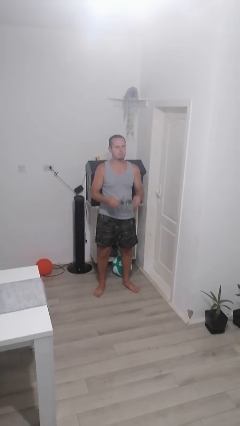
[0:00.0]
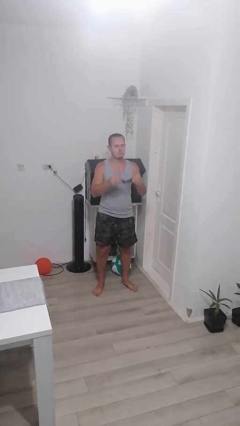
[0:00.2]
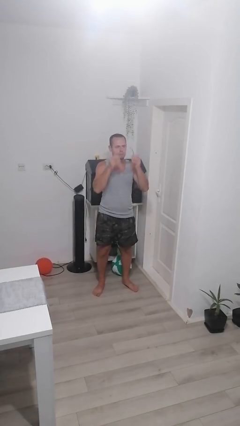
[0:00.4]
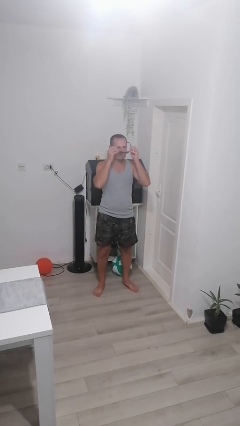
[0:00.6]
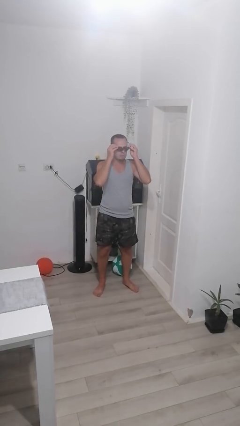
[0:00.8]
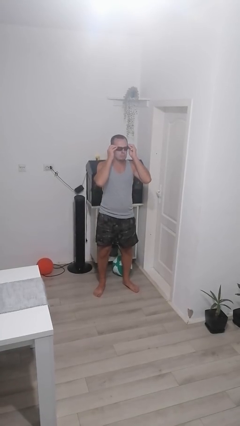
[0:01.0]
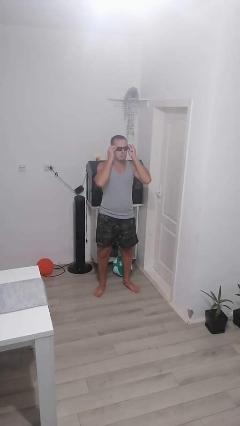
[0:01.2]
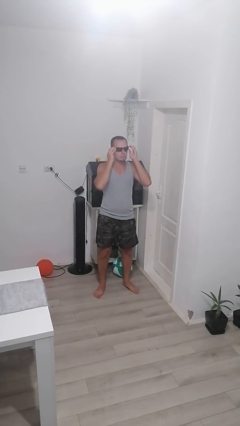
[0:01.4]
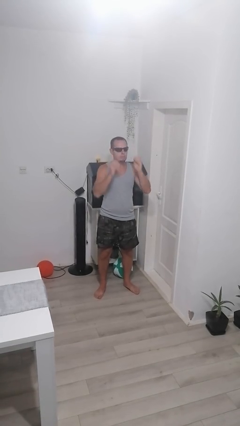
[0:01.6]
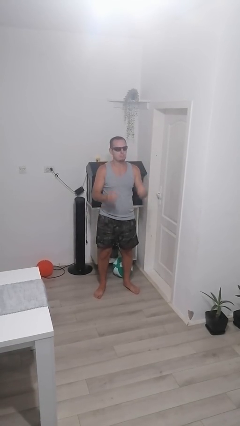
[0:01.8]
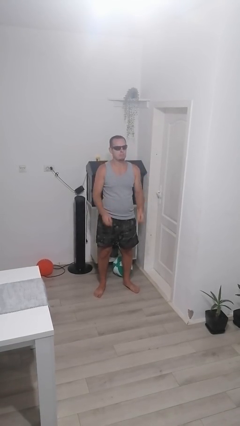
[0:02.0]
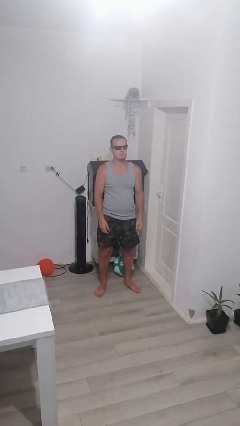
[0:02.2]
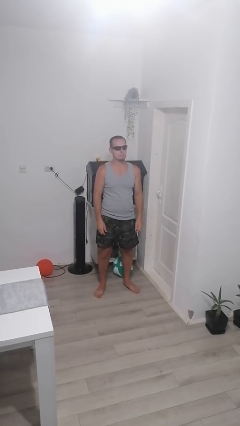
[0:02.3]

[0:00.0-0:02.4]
person puts on sunglasses

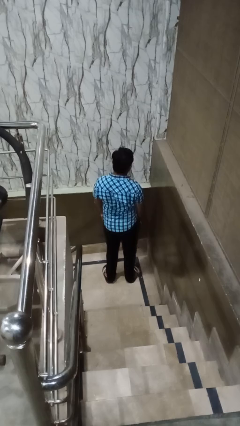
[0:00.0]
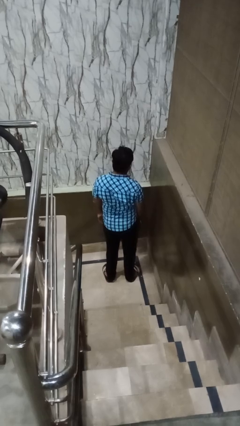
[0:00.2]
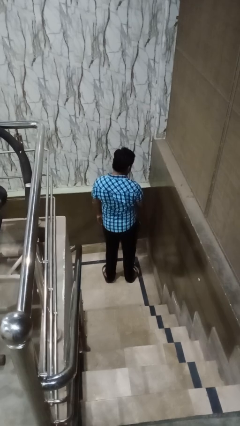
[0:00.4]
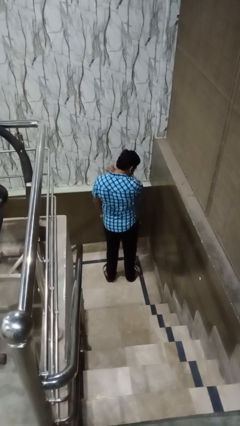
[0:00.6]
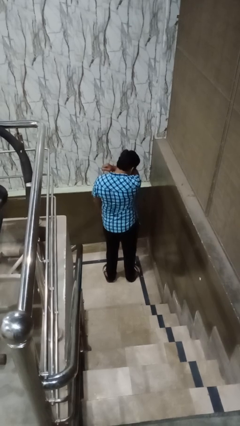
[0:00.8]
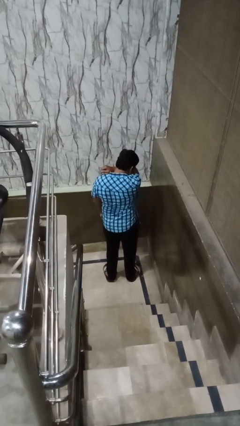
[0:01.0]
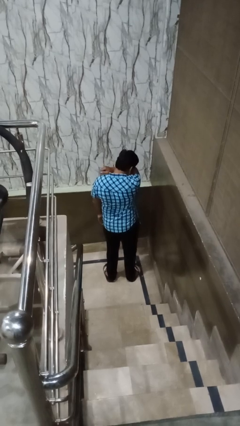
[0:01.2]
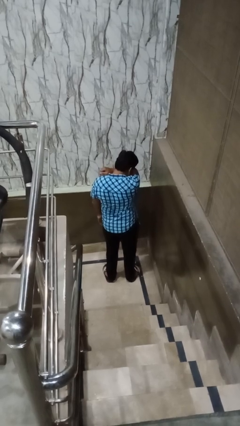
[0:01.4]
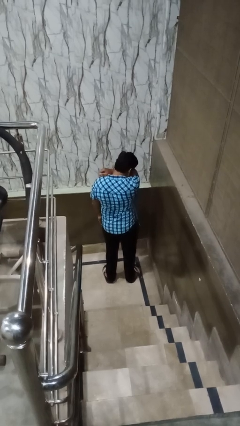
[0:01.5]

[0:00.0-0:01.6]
person sneezes into arm

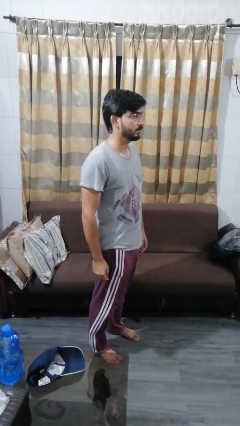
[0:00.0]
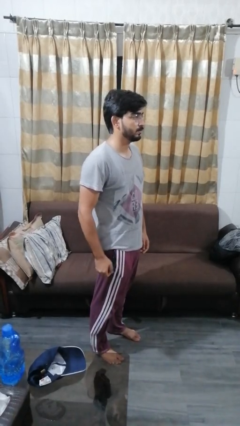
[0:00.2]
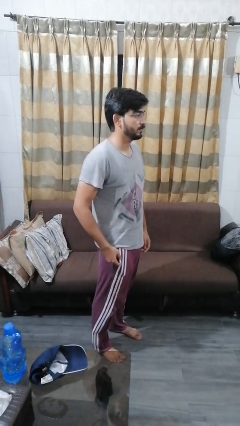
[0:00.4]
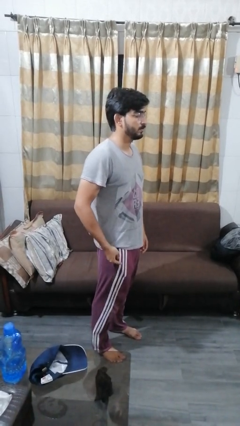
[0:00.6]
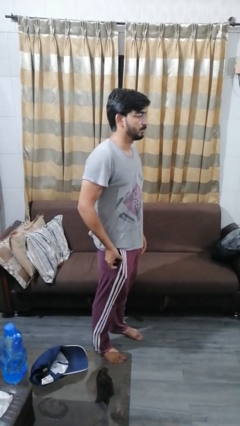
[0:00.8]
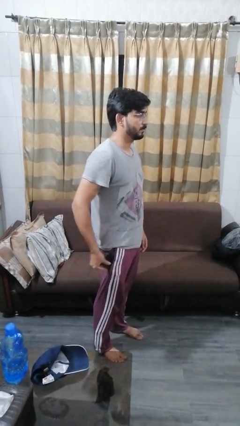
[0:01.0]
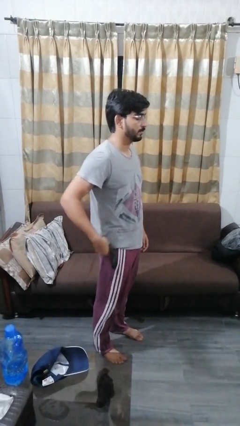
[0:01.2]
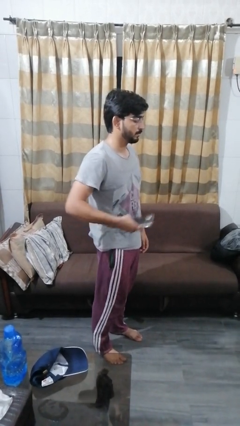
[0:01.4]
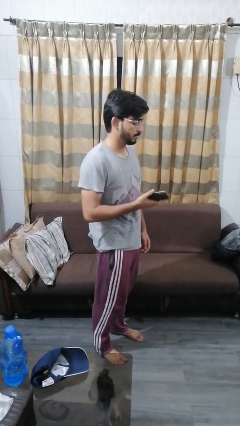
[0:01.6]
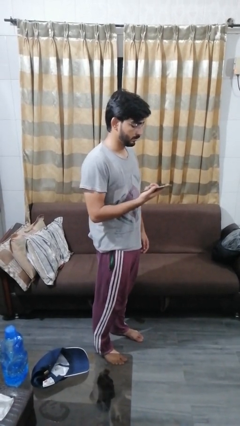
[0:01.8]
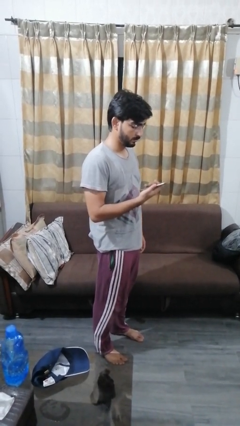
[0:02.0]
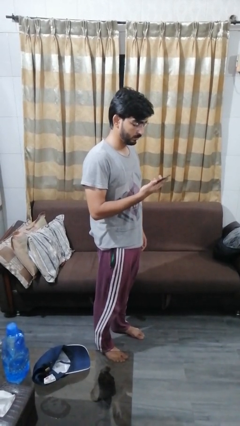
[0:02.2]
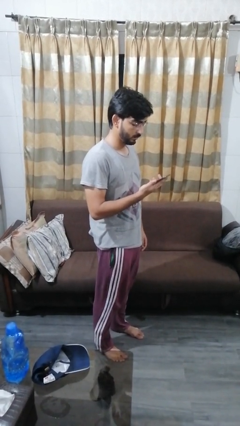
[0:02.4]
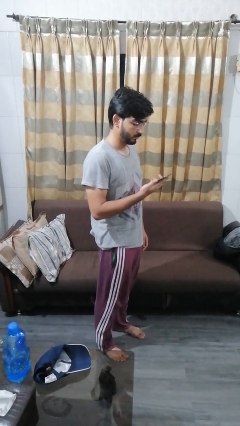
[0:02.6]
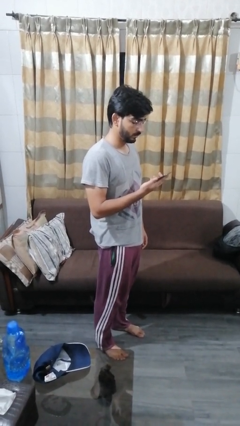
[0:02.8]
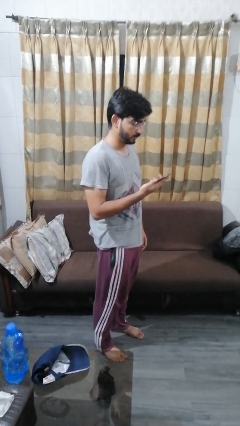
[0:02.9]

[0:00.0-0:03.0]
person takes phone from pocket

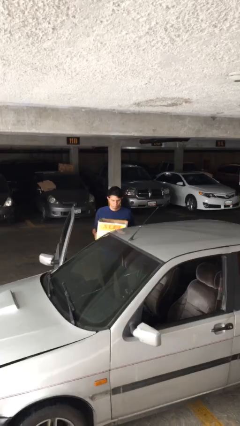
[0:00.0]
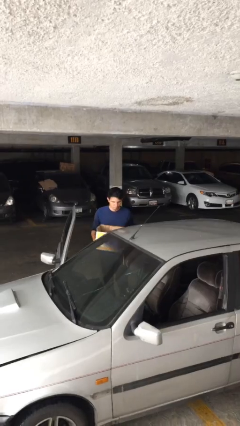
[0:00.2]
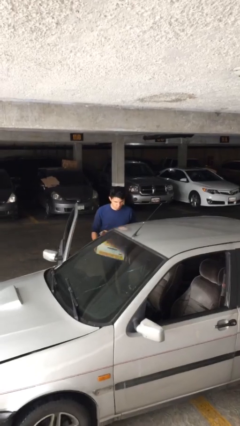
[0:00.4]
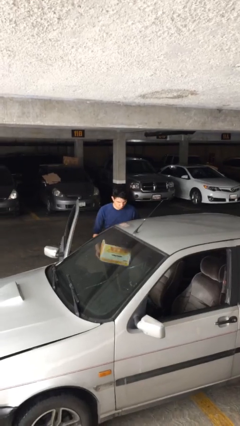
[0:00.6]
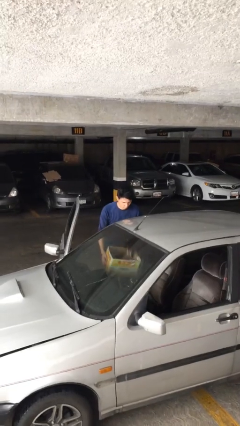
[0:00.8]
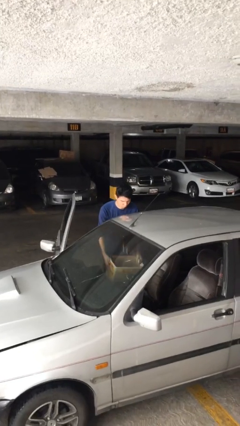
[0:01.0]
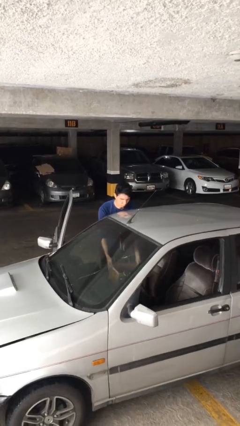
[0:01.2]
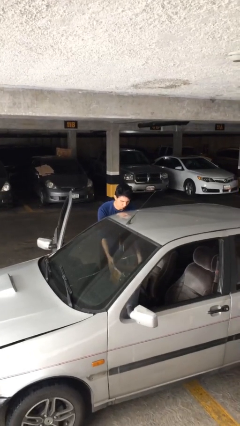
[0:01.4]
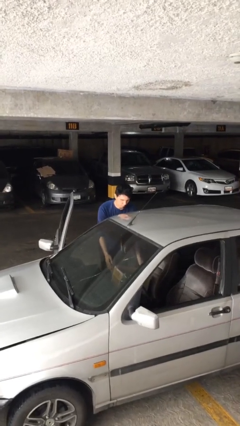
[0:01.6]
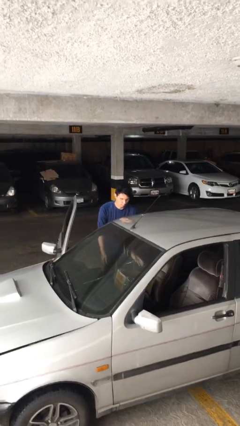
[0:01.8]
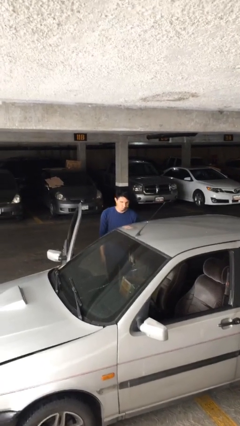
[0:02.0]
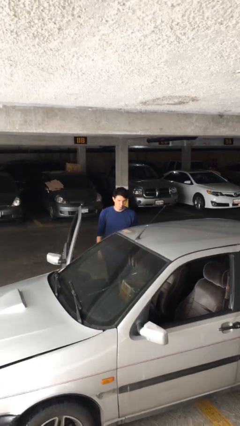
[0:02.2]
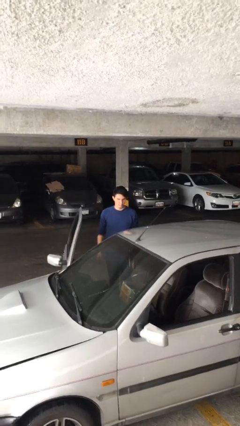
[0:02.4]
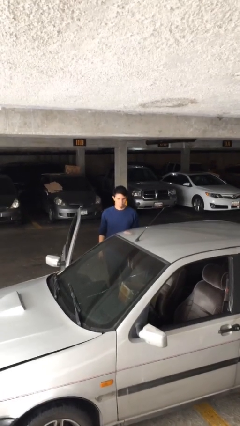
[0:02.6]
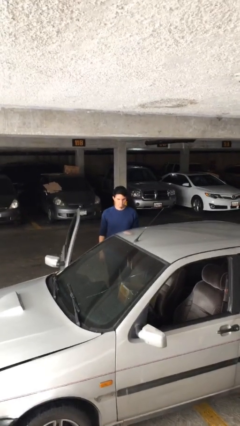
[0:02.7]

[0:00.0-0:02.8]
person loads car

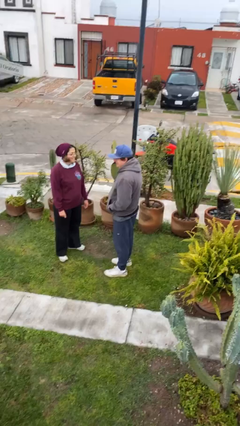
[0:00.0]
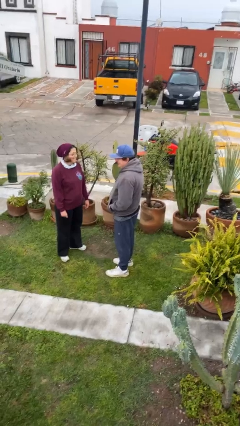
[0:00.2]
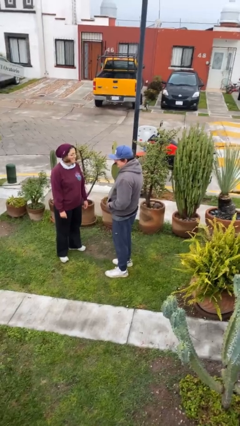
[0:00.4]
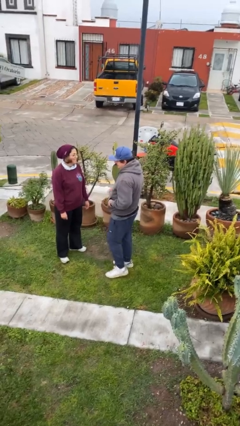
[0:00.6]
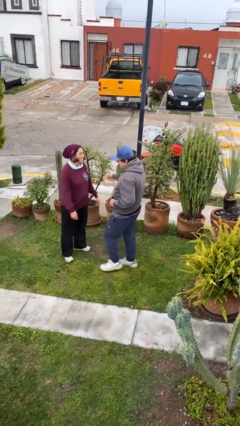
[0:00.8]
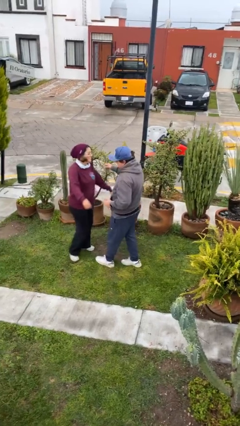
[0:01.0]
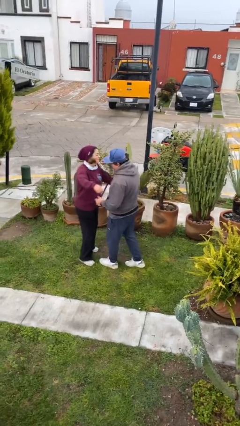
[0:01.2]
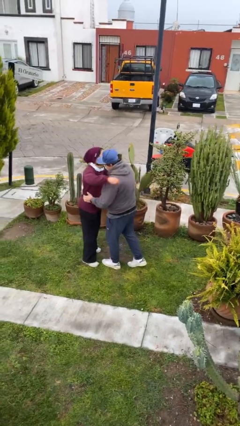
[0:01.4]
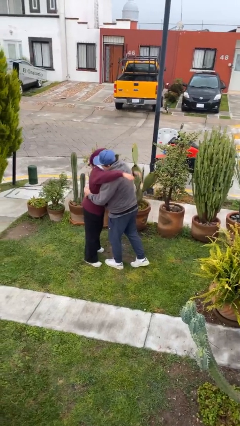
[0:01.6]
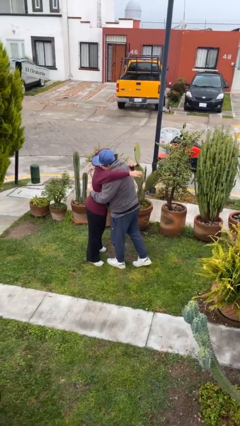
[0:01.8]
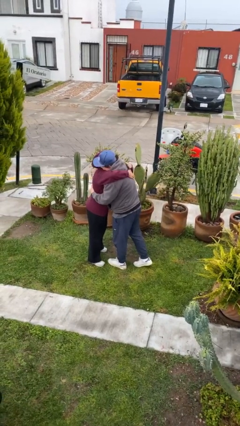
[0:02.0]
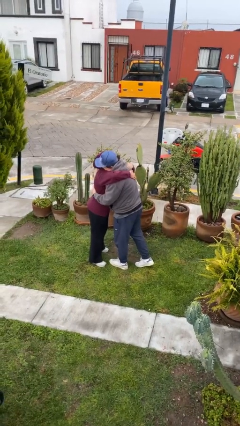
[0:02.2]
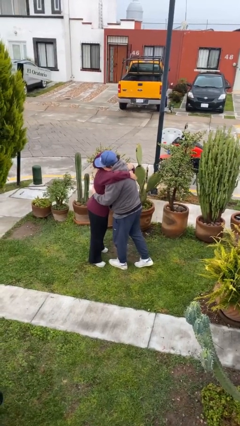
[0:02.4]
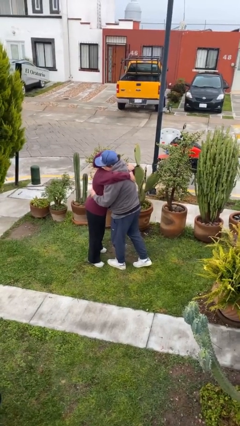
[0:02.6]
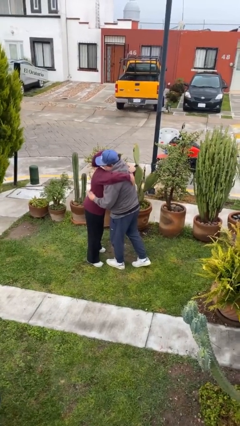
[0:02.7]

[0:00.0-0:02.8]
person embraces person

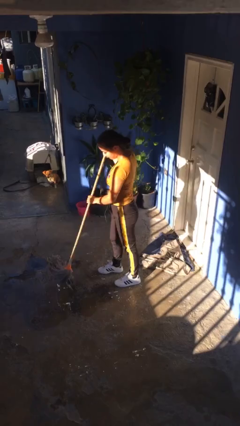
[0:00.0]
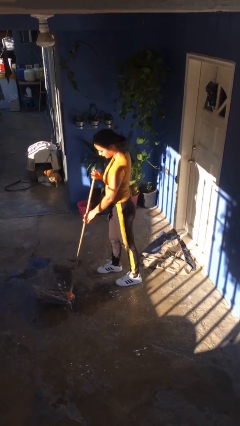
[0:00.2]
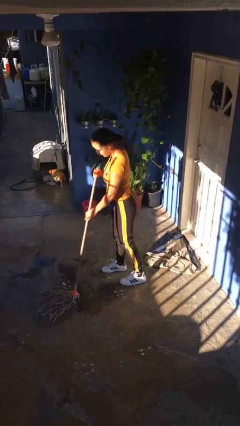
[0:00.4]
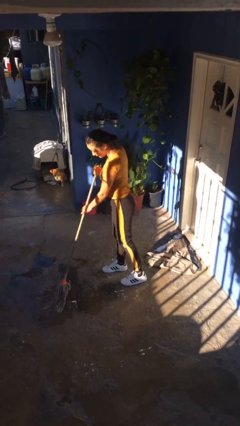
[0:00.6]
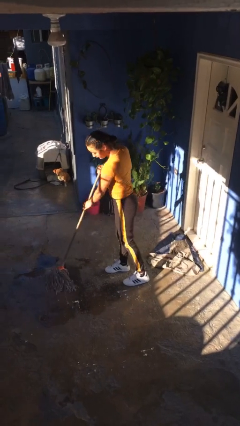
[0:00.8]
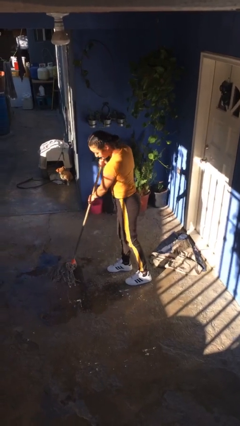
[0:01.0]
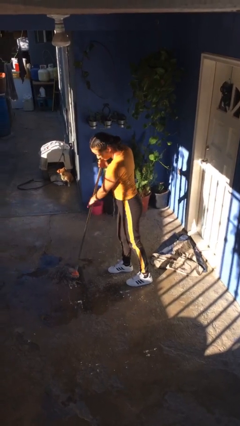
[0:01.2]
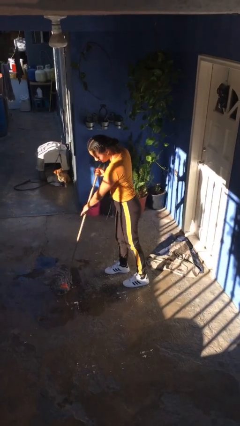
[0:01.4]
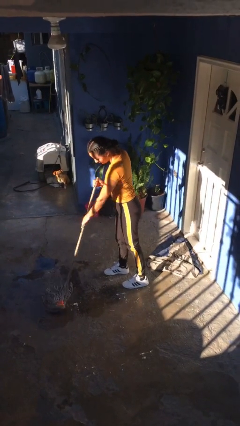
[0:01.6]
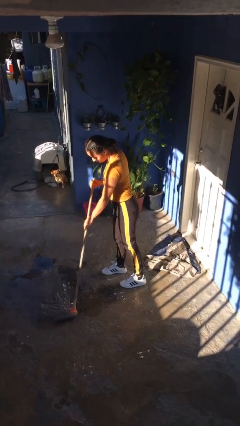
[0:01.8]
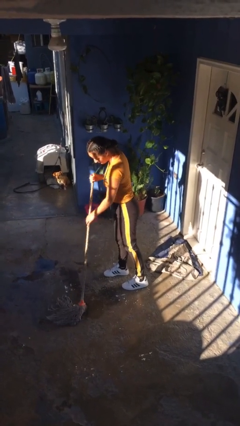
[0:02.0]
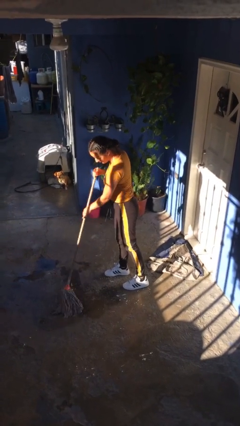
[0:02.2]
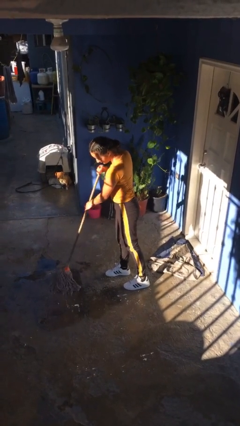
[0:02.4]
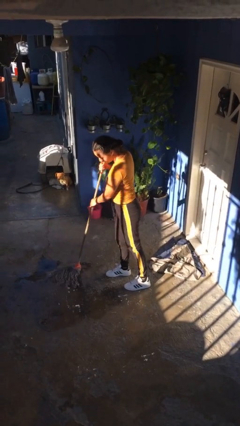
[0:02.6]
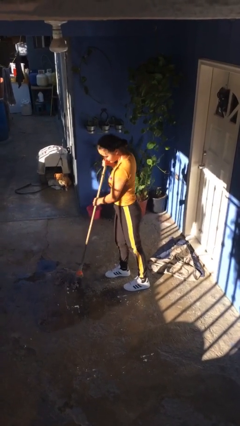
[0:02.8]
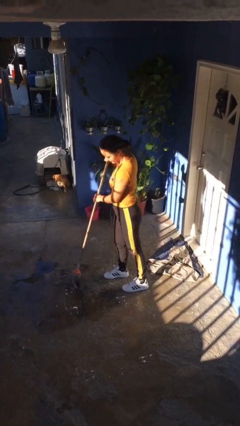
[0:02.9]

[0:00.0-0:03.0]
person mops

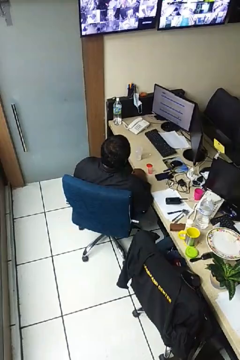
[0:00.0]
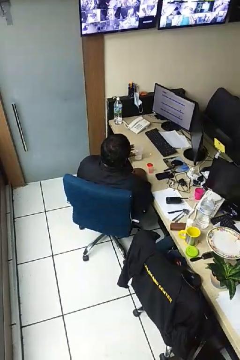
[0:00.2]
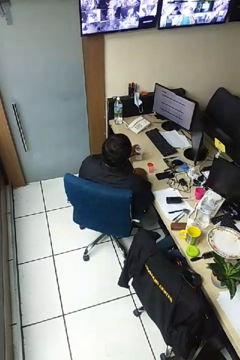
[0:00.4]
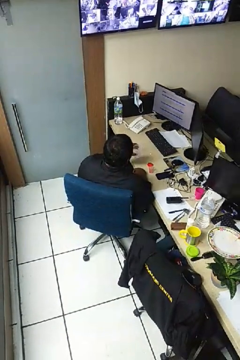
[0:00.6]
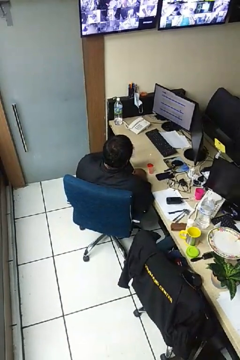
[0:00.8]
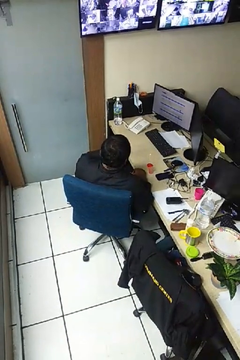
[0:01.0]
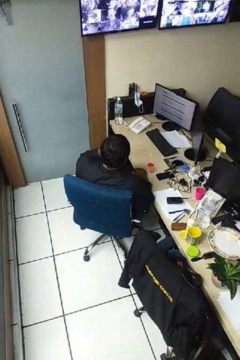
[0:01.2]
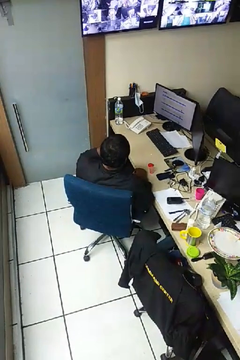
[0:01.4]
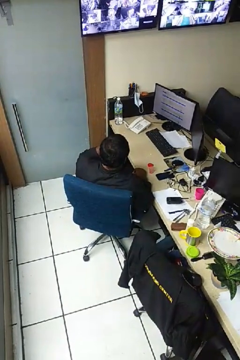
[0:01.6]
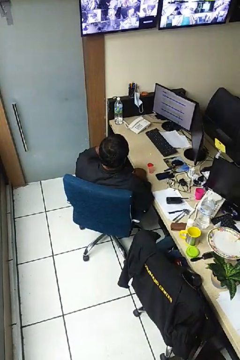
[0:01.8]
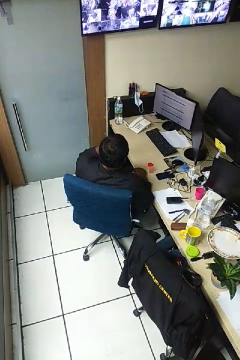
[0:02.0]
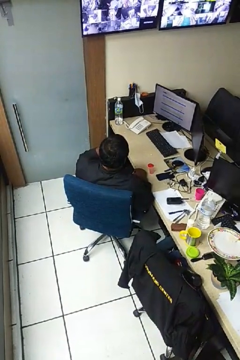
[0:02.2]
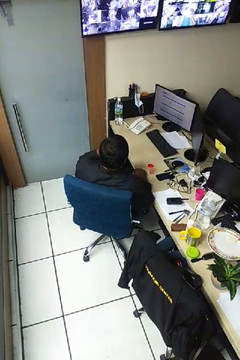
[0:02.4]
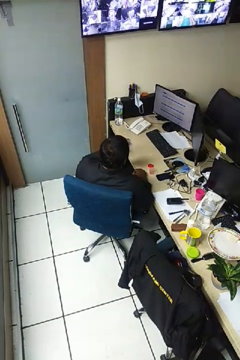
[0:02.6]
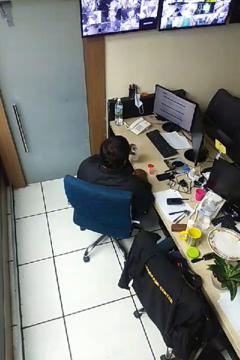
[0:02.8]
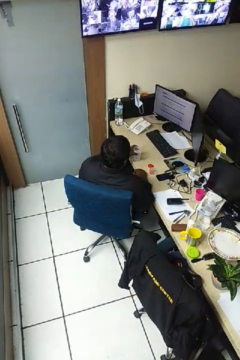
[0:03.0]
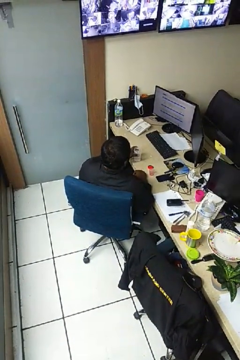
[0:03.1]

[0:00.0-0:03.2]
person drinks from cup
